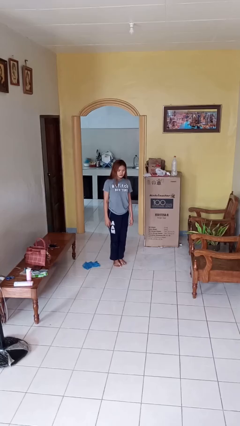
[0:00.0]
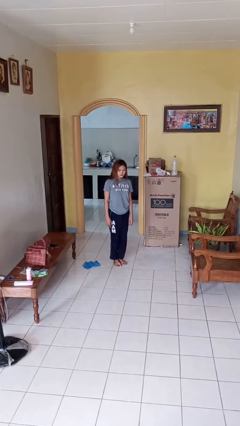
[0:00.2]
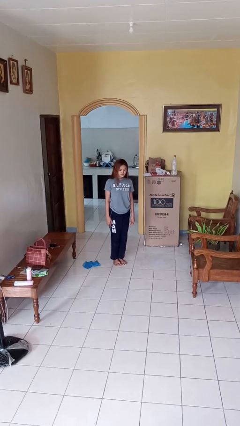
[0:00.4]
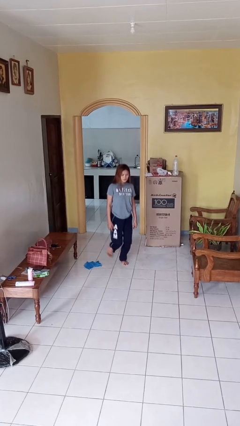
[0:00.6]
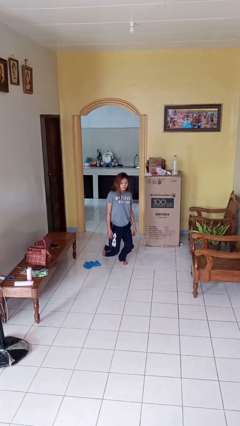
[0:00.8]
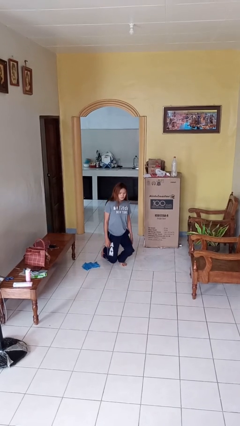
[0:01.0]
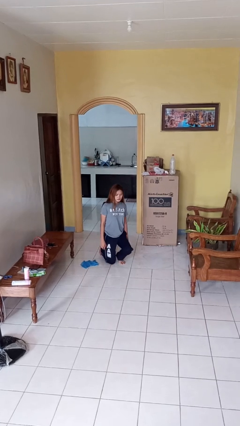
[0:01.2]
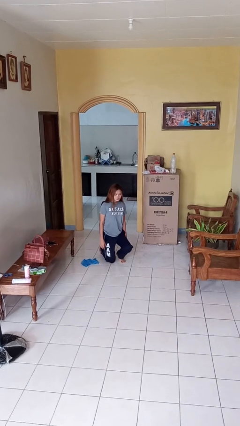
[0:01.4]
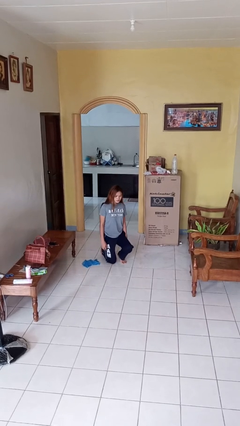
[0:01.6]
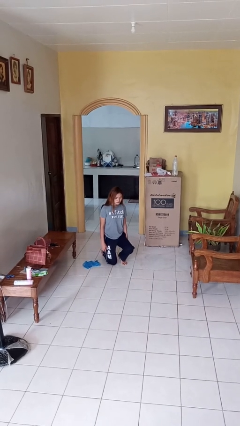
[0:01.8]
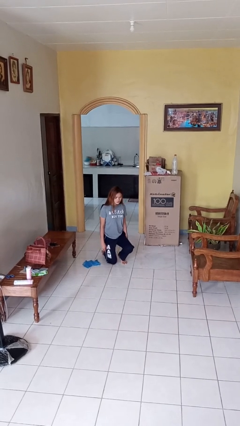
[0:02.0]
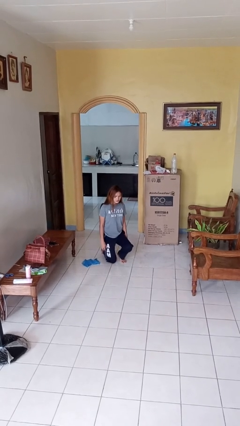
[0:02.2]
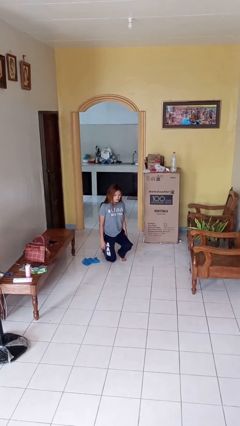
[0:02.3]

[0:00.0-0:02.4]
person kneels

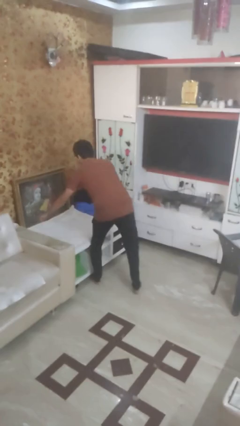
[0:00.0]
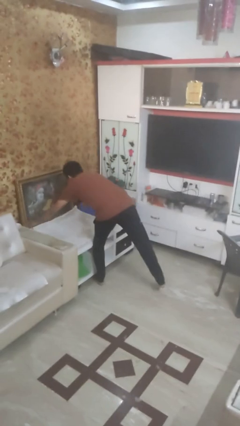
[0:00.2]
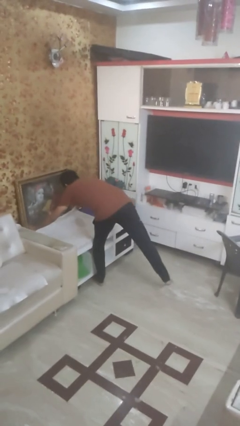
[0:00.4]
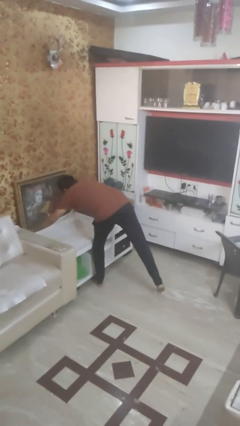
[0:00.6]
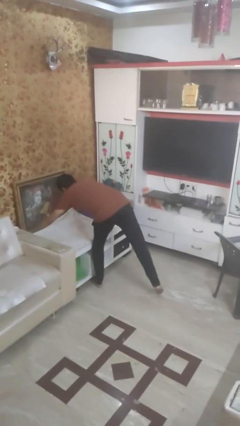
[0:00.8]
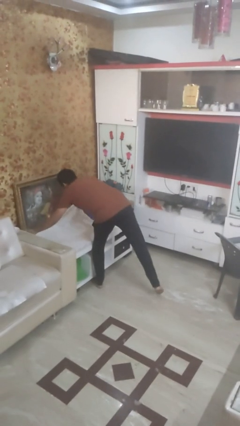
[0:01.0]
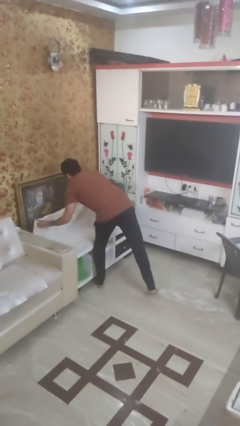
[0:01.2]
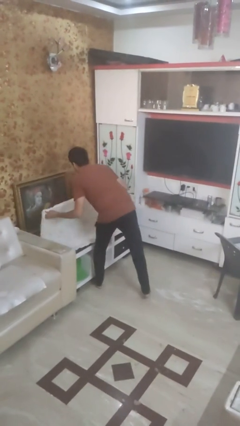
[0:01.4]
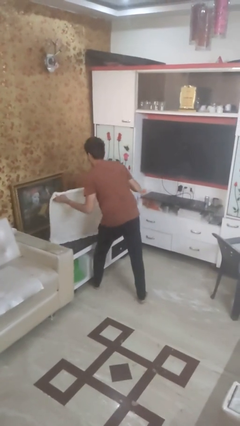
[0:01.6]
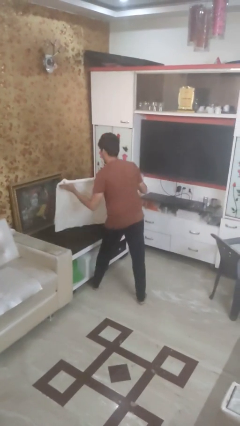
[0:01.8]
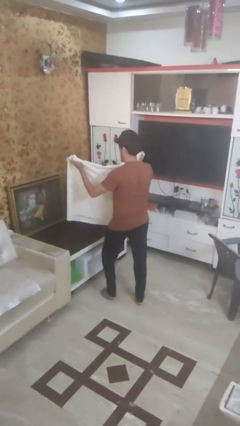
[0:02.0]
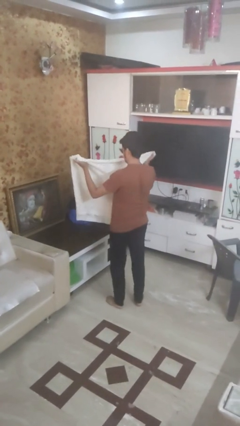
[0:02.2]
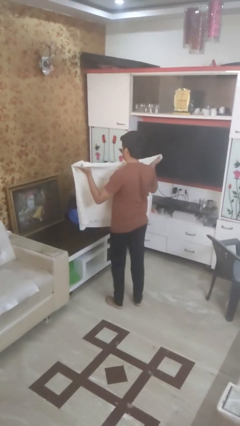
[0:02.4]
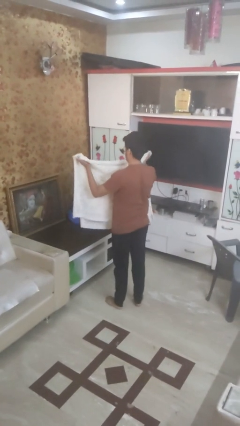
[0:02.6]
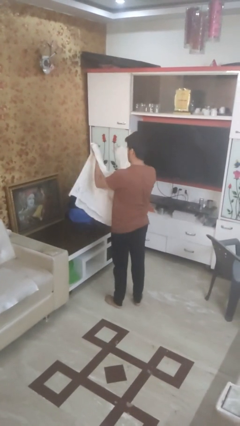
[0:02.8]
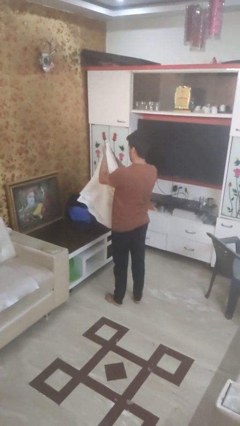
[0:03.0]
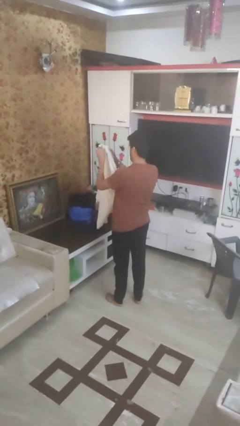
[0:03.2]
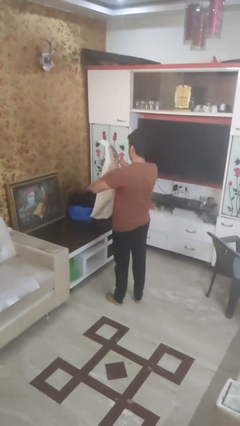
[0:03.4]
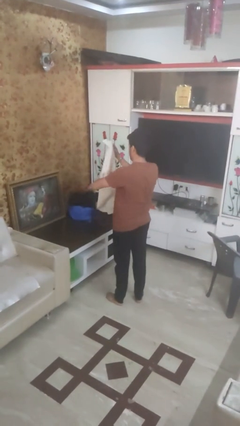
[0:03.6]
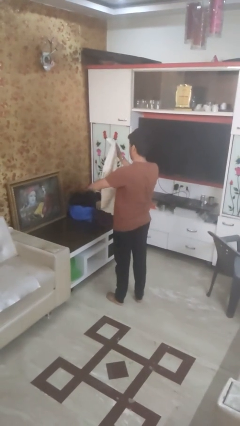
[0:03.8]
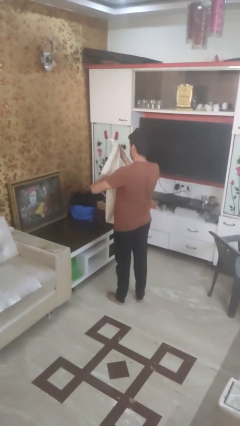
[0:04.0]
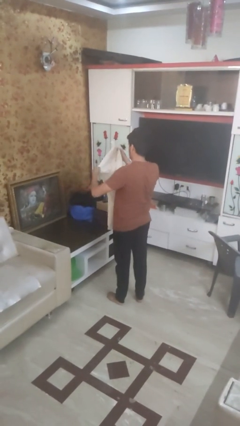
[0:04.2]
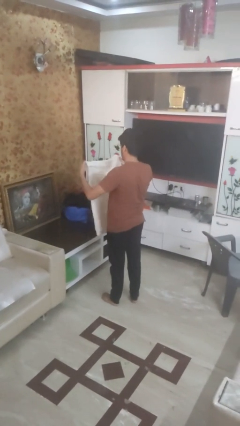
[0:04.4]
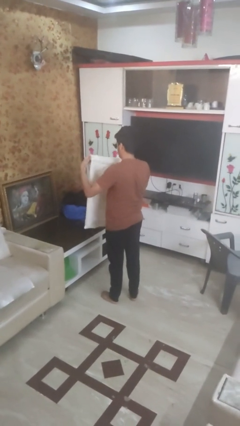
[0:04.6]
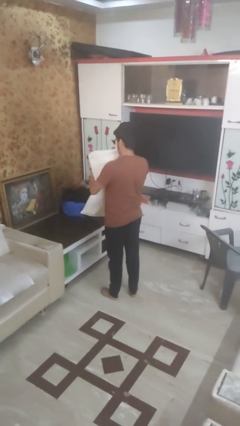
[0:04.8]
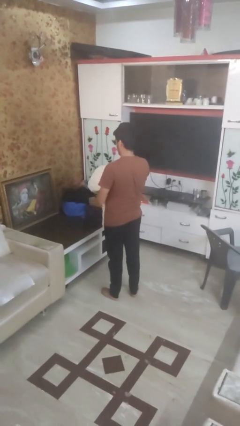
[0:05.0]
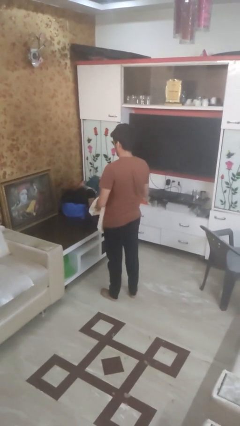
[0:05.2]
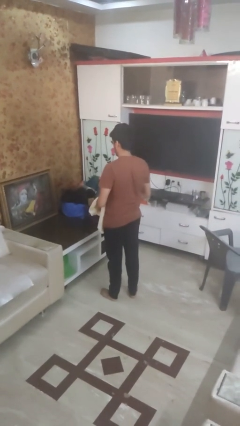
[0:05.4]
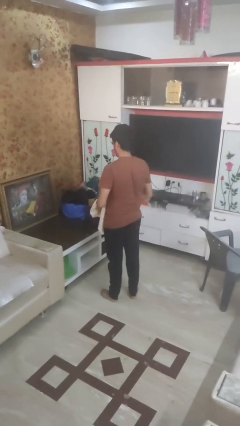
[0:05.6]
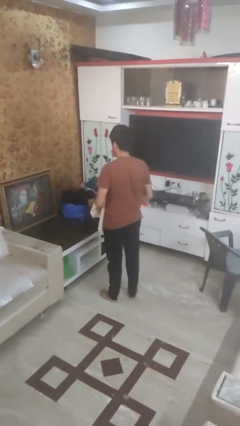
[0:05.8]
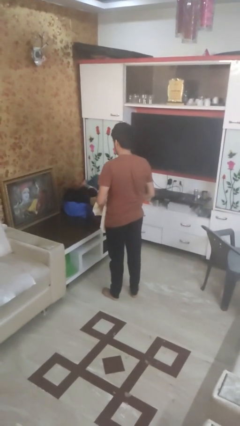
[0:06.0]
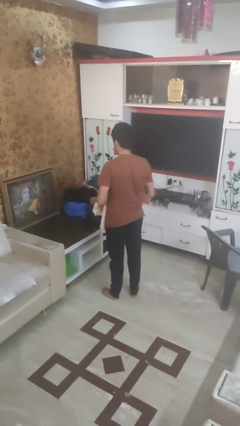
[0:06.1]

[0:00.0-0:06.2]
person folds tablecloth

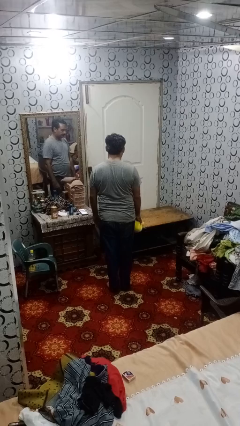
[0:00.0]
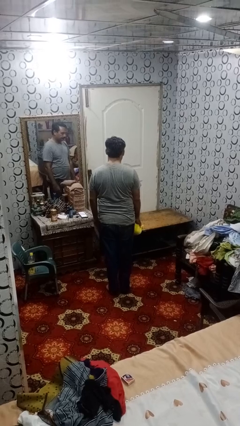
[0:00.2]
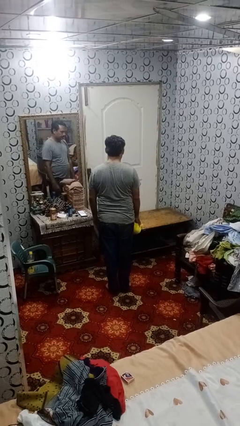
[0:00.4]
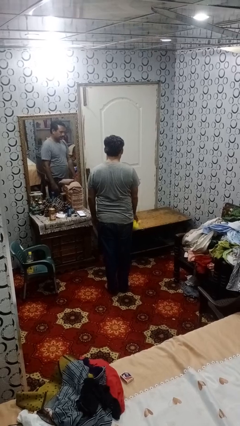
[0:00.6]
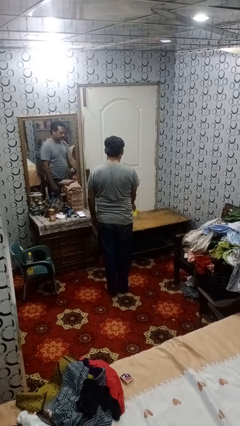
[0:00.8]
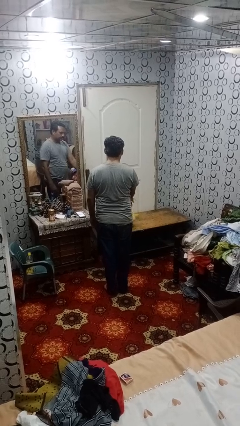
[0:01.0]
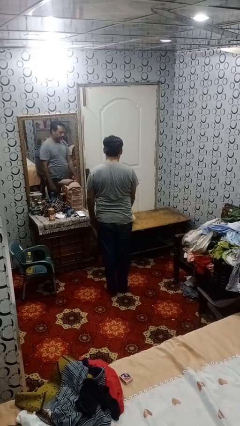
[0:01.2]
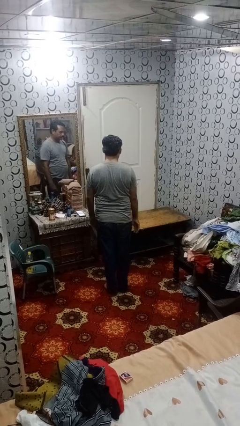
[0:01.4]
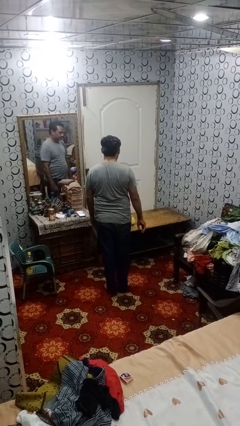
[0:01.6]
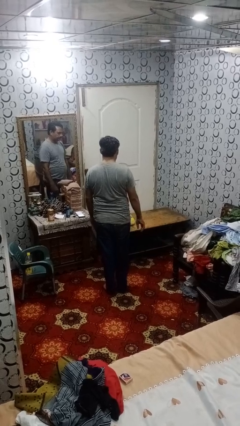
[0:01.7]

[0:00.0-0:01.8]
person throws object on table

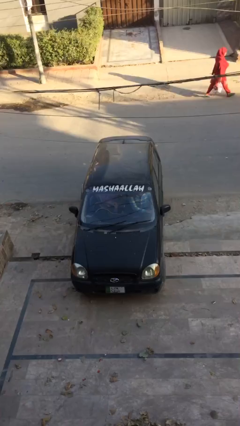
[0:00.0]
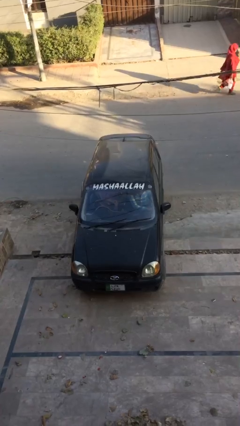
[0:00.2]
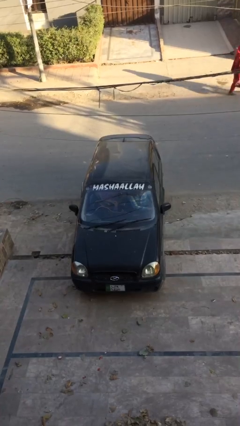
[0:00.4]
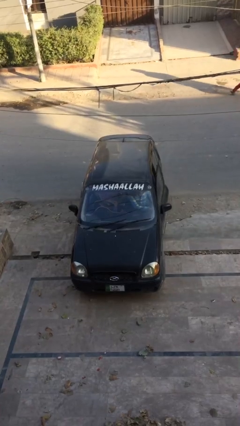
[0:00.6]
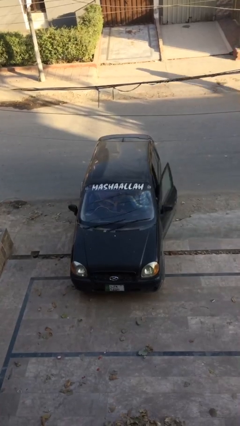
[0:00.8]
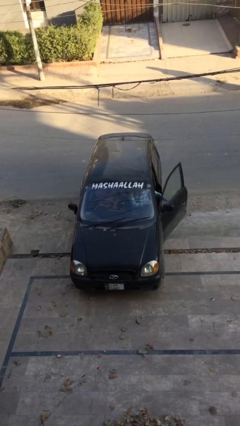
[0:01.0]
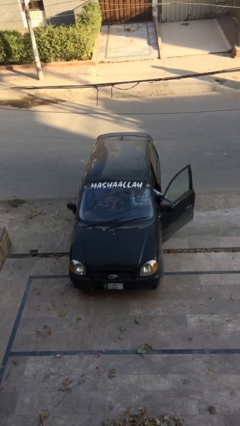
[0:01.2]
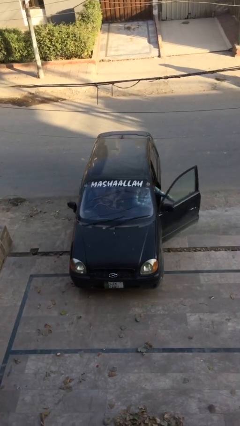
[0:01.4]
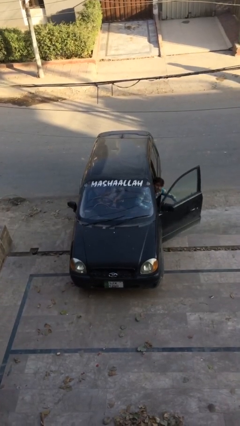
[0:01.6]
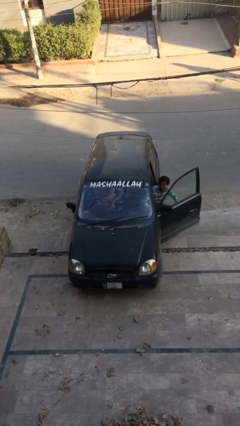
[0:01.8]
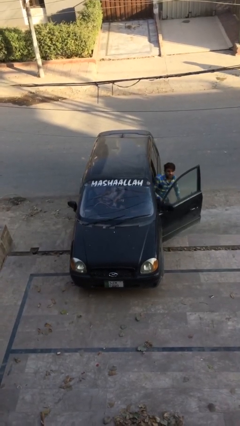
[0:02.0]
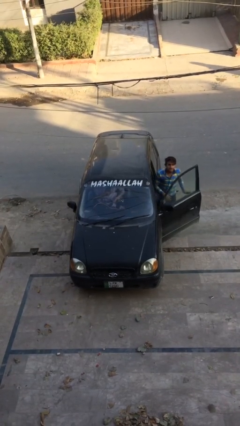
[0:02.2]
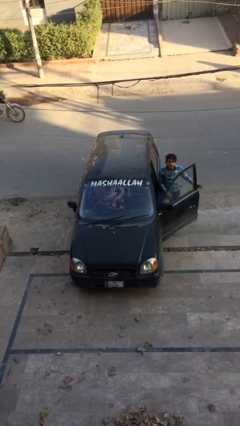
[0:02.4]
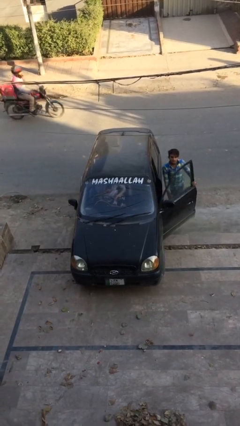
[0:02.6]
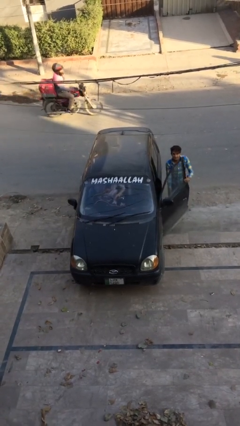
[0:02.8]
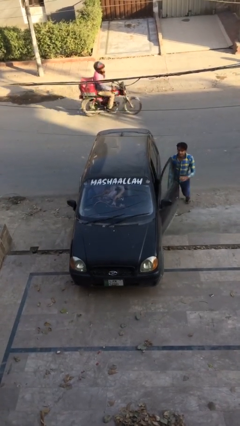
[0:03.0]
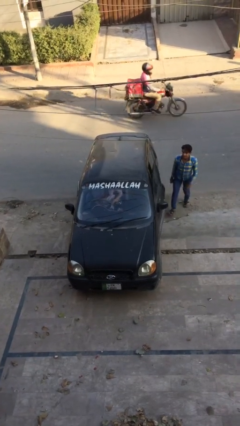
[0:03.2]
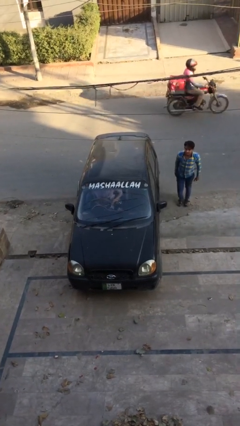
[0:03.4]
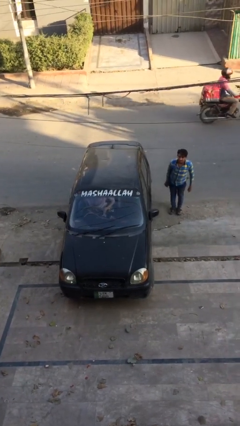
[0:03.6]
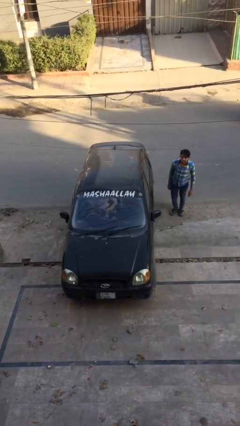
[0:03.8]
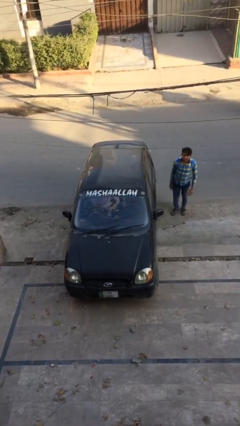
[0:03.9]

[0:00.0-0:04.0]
car drops off person

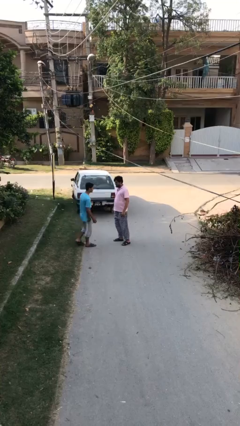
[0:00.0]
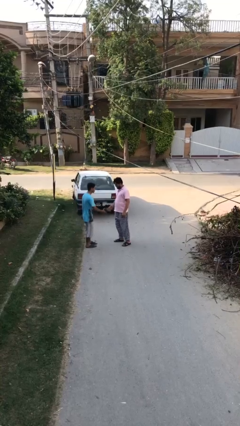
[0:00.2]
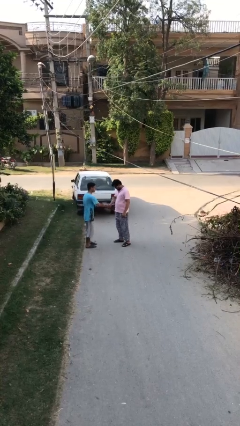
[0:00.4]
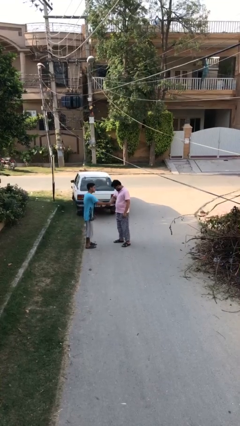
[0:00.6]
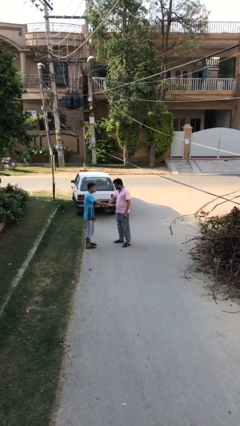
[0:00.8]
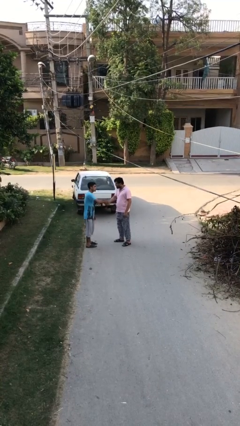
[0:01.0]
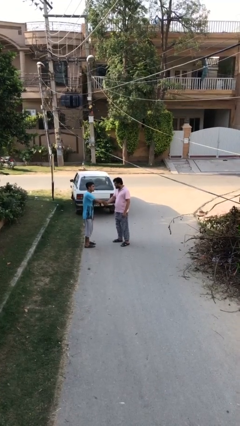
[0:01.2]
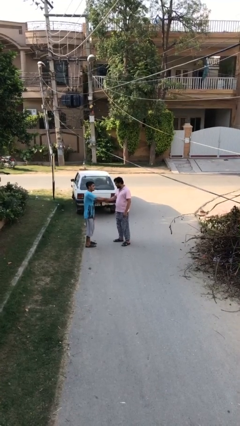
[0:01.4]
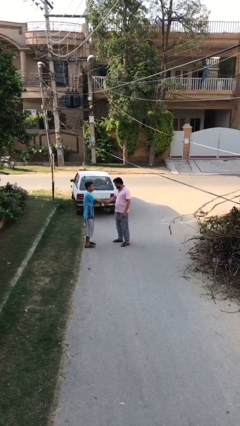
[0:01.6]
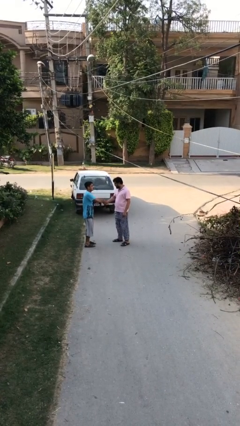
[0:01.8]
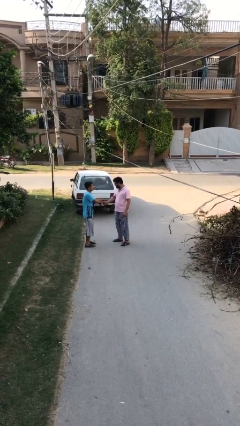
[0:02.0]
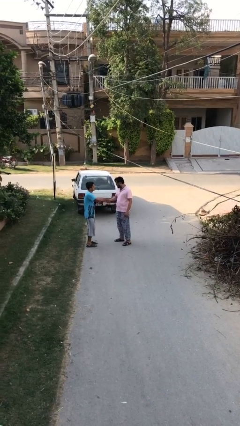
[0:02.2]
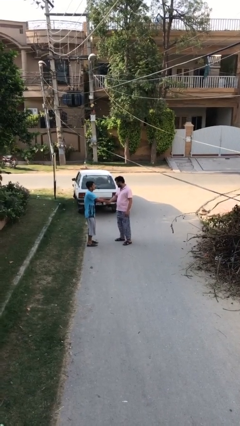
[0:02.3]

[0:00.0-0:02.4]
person shakes hand

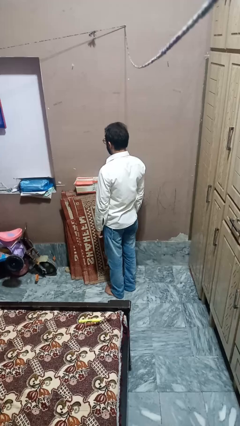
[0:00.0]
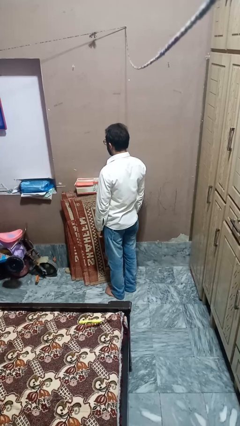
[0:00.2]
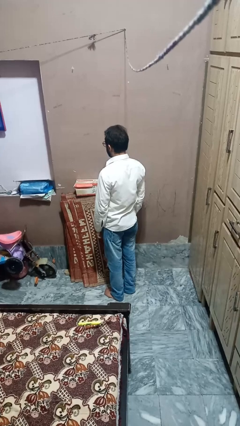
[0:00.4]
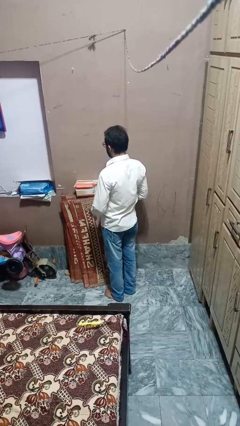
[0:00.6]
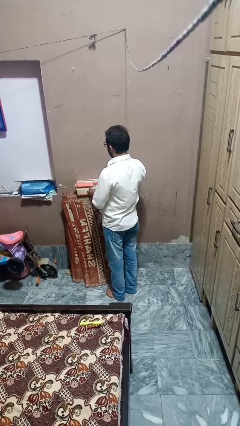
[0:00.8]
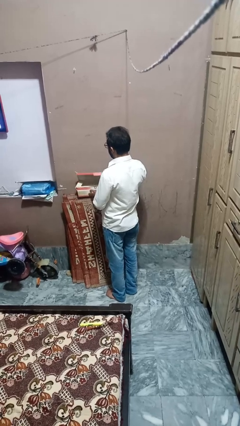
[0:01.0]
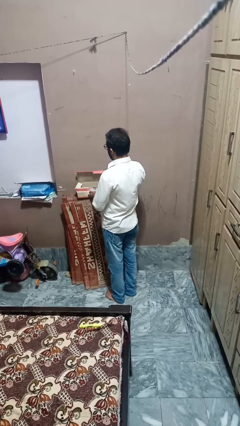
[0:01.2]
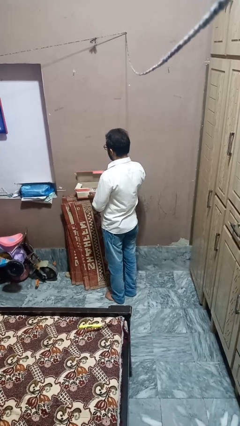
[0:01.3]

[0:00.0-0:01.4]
person opens mailbox
